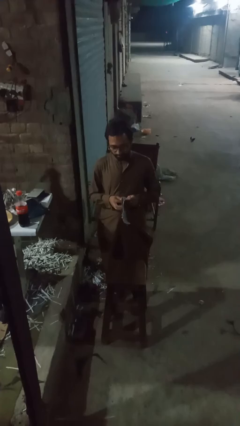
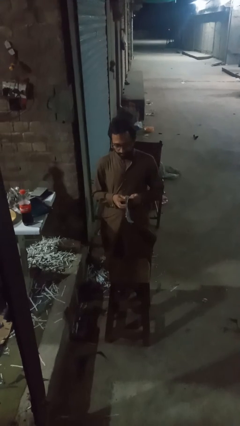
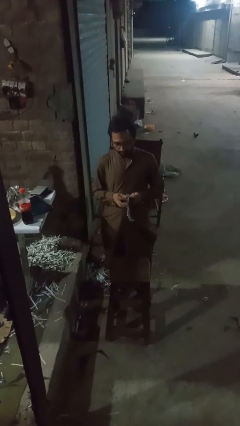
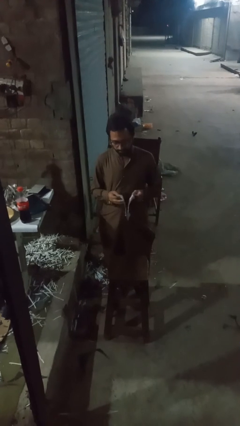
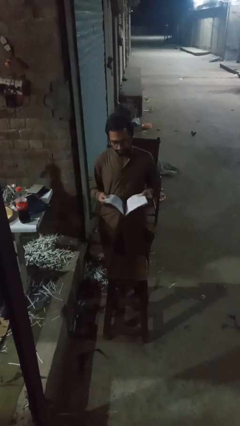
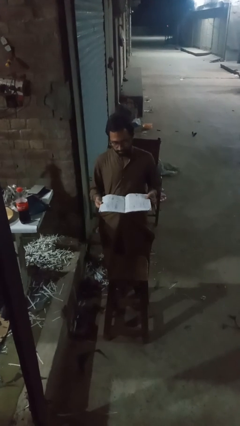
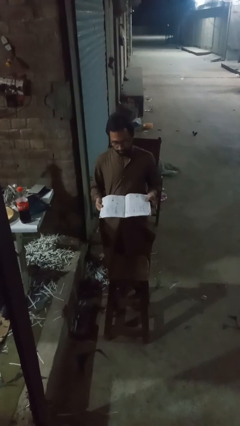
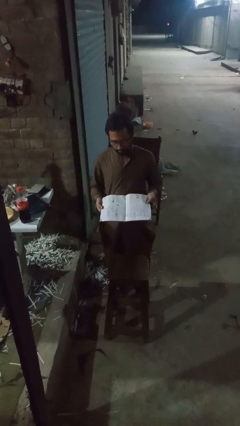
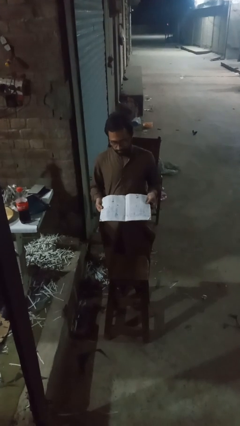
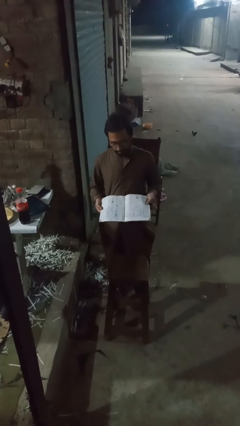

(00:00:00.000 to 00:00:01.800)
person reads newspaper

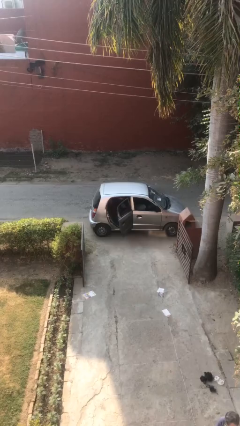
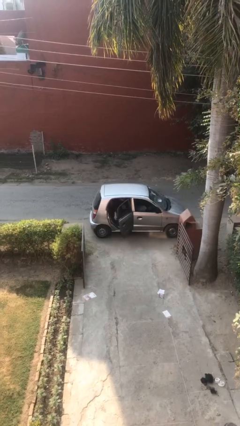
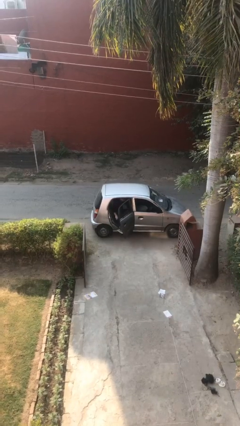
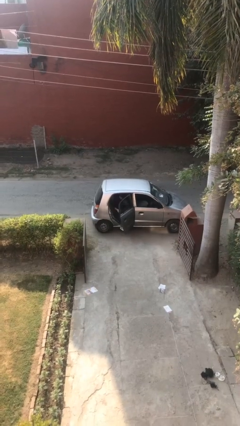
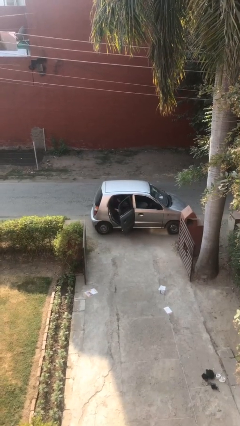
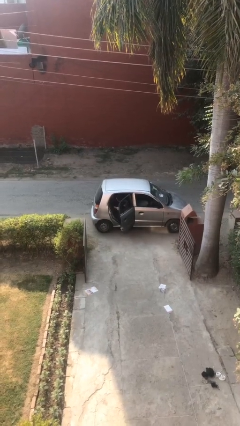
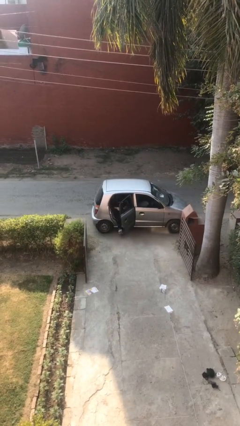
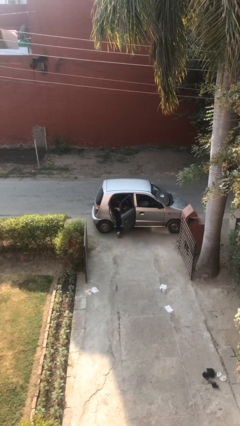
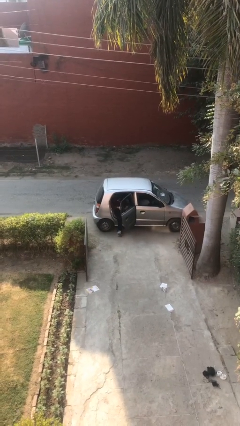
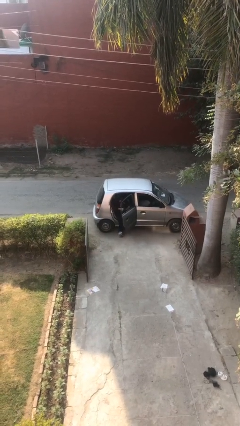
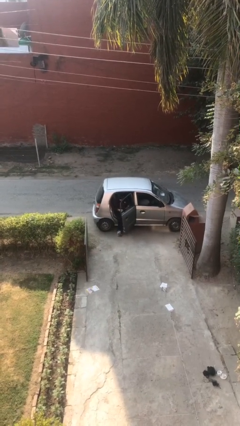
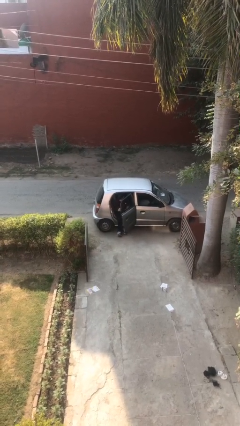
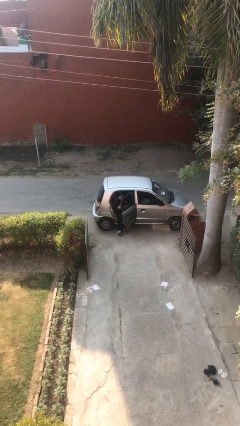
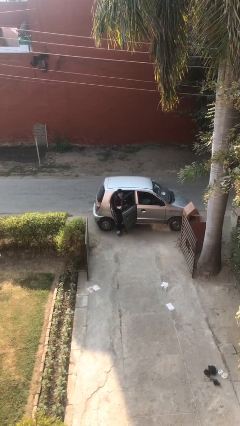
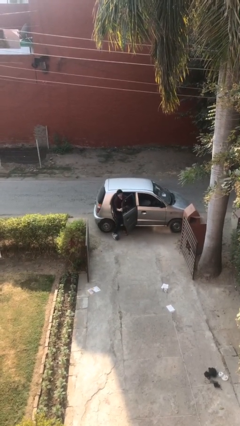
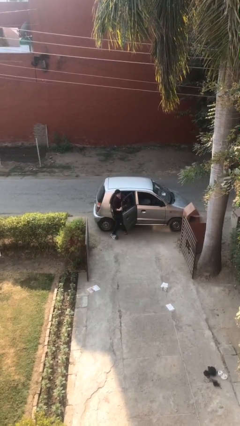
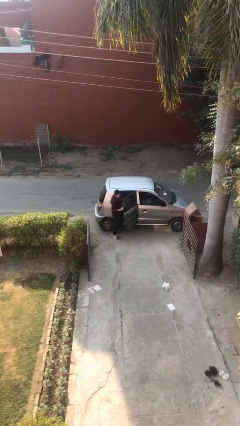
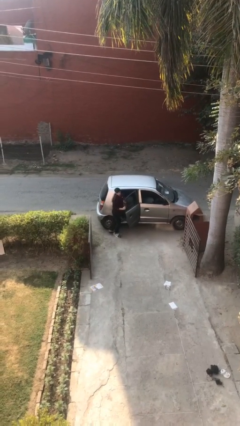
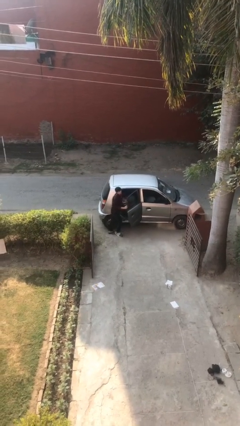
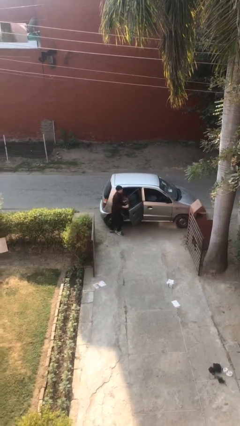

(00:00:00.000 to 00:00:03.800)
person exits car

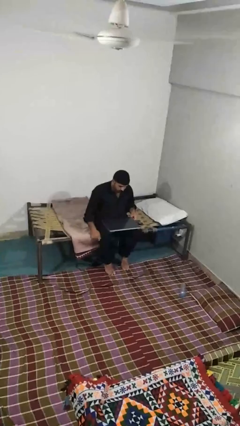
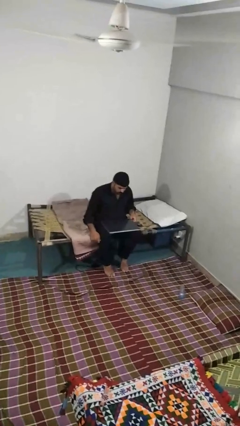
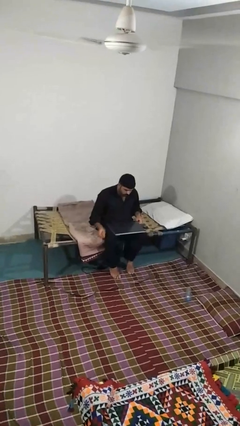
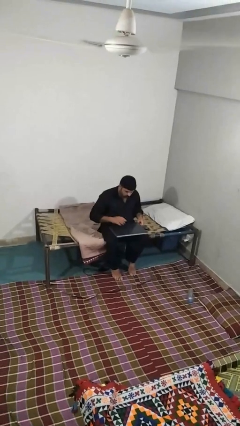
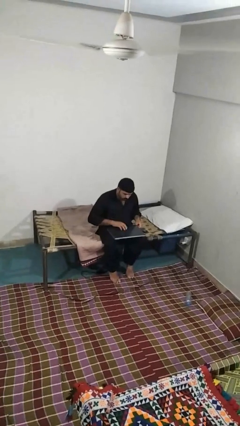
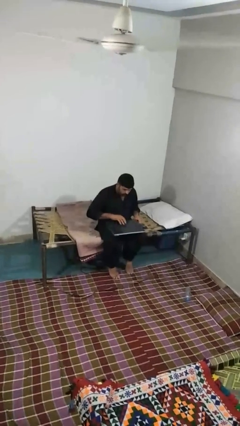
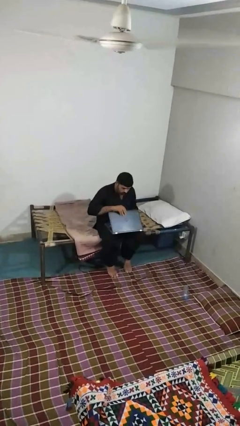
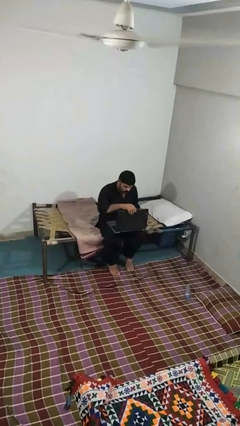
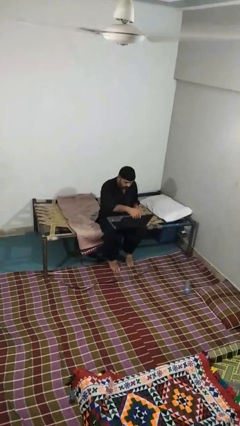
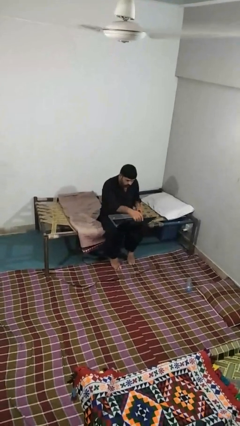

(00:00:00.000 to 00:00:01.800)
person opens laptop

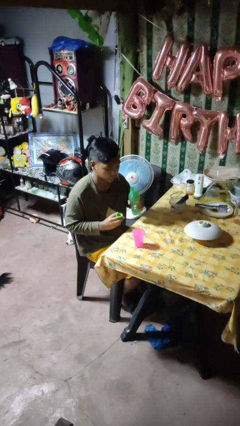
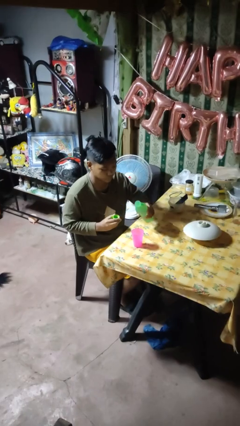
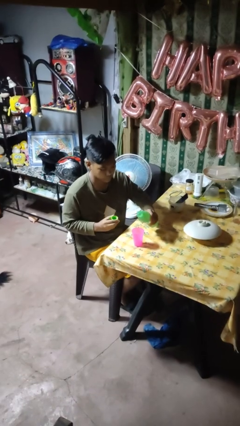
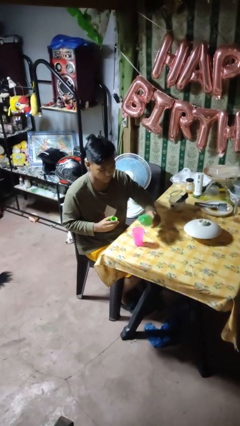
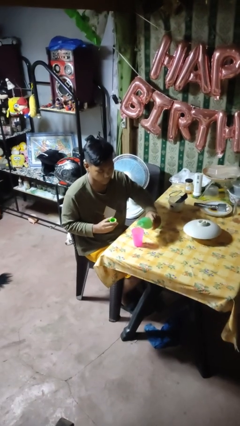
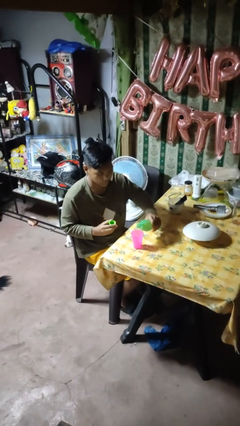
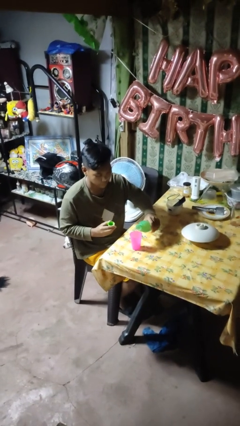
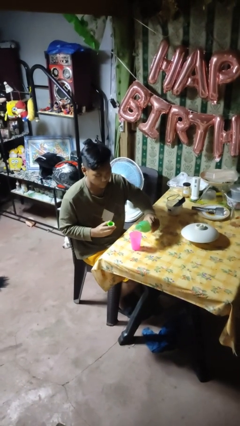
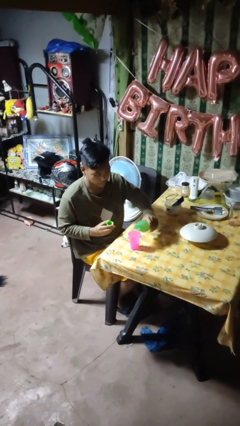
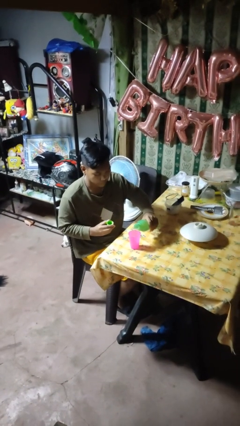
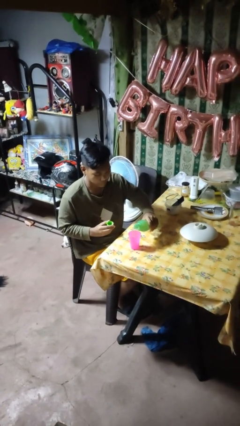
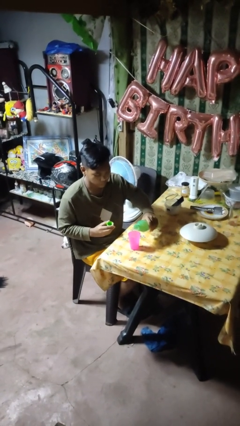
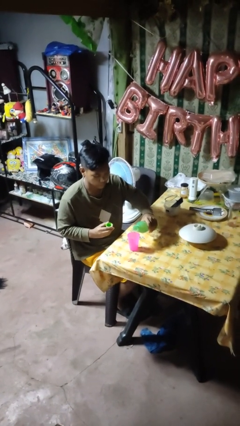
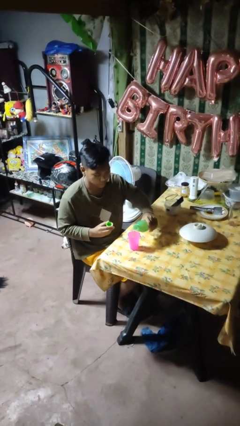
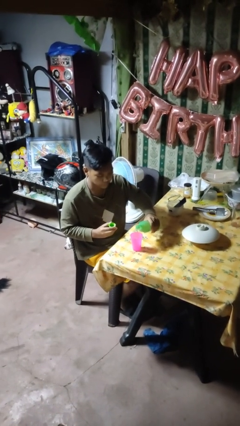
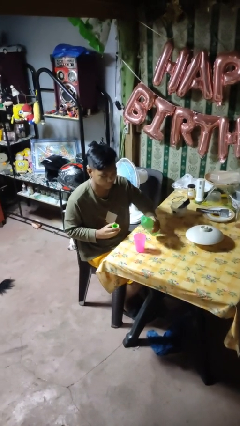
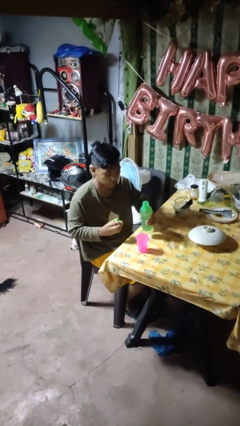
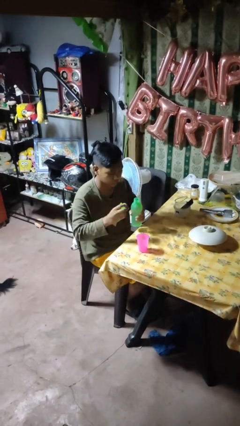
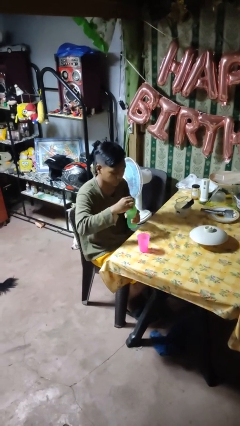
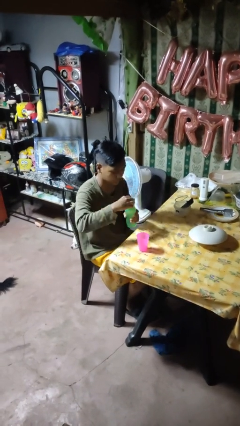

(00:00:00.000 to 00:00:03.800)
person pours liquid into cup

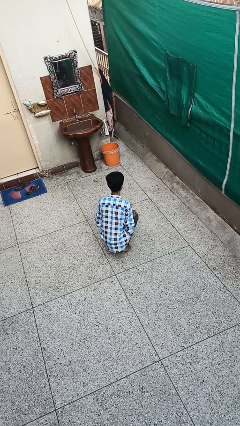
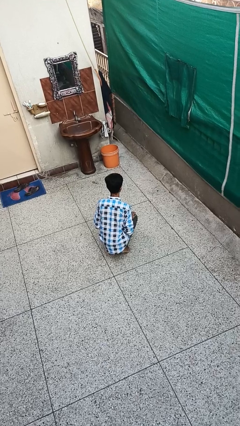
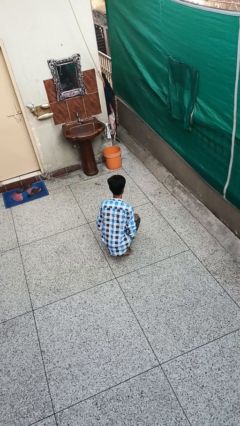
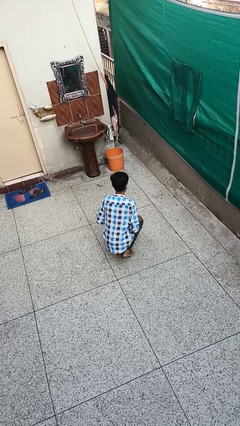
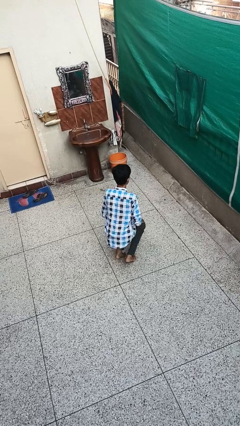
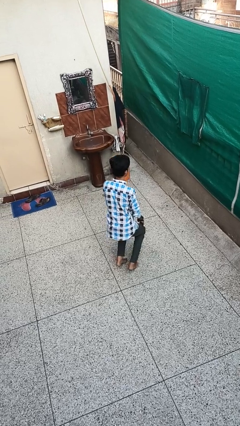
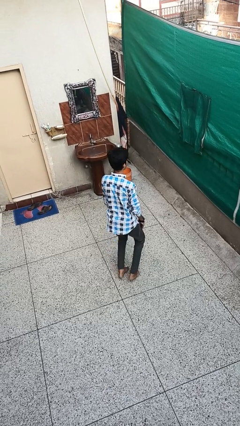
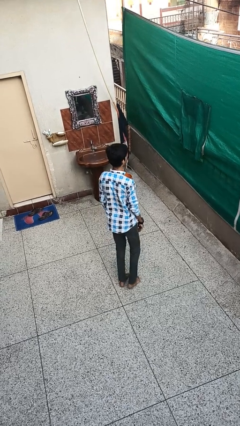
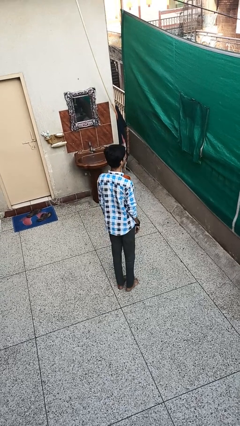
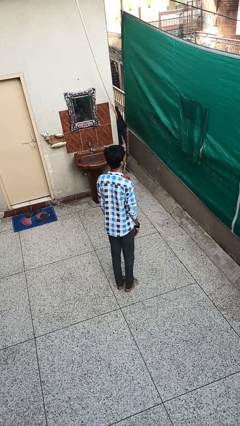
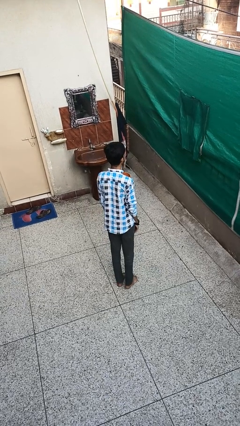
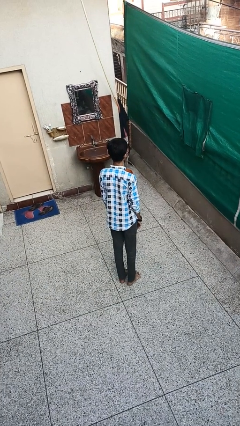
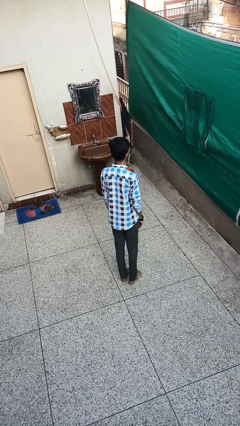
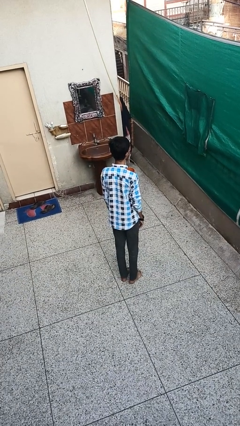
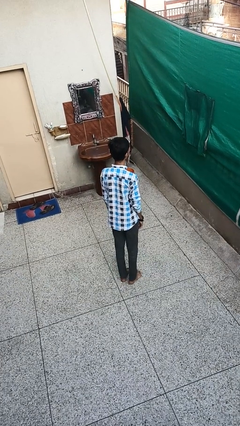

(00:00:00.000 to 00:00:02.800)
person stands up

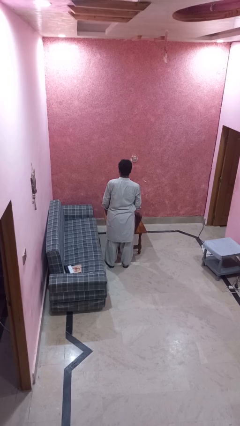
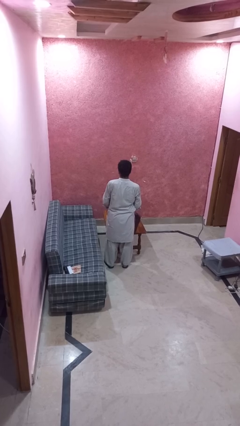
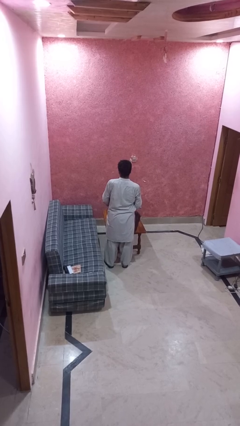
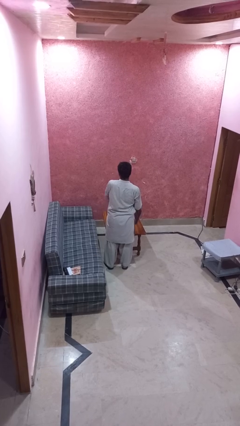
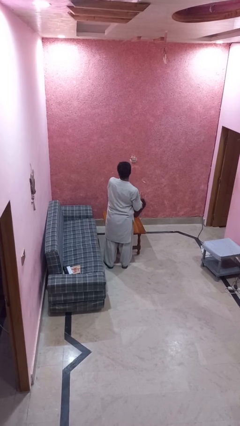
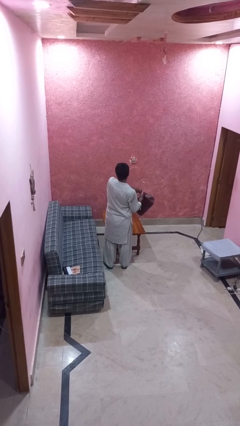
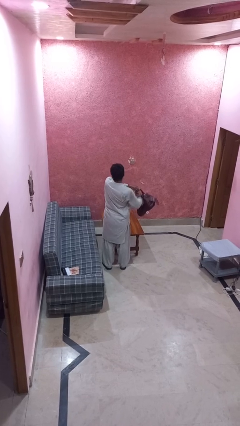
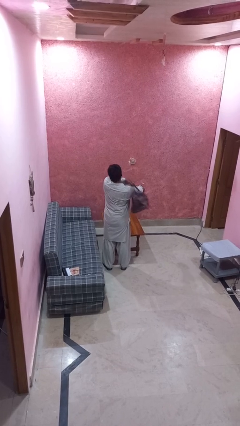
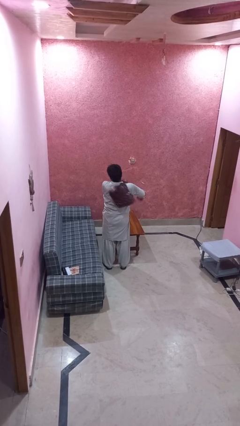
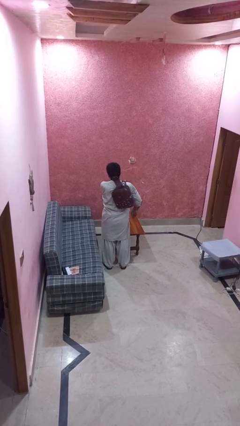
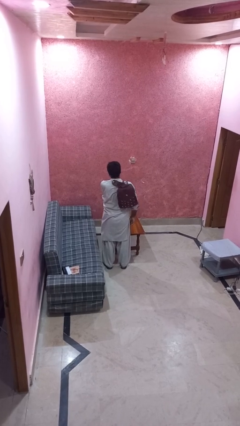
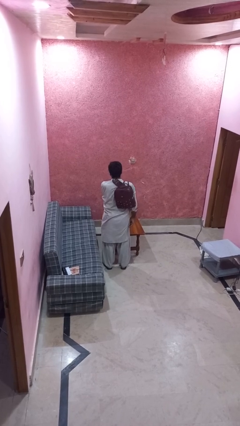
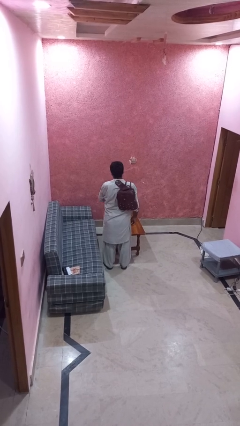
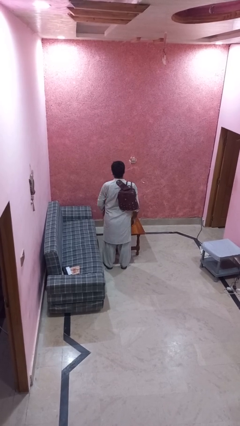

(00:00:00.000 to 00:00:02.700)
person puts on backpack

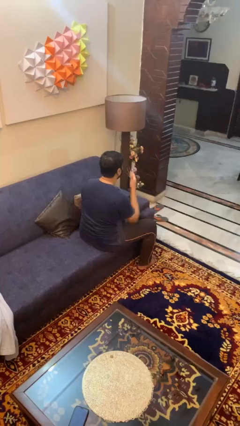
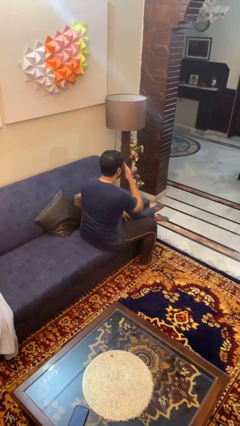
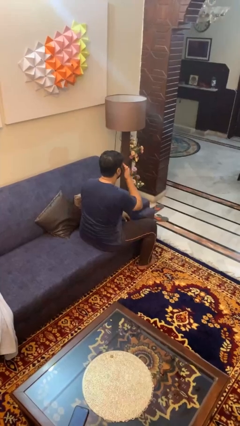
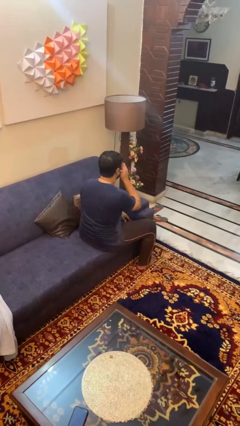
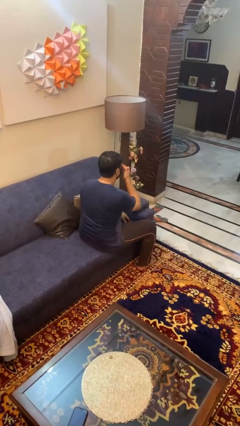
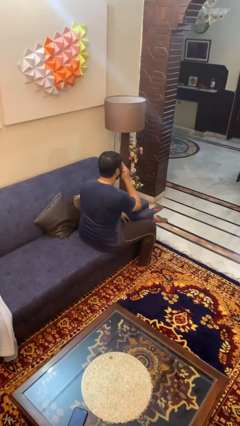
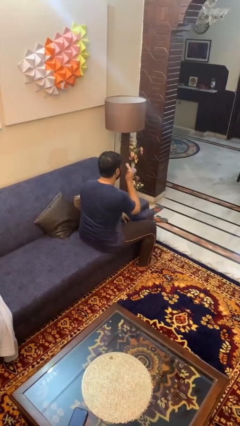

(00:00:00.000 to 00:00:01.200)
person rubs eyes
